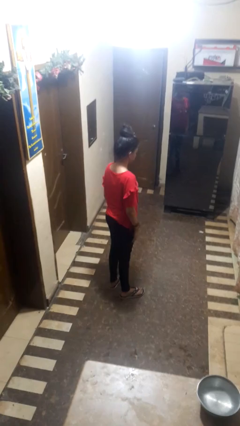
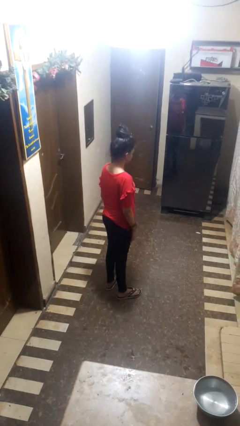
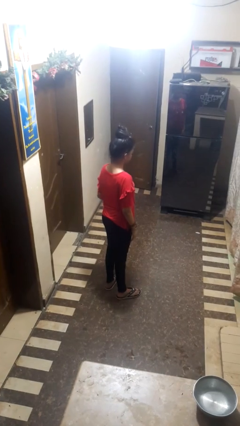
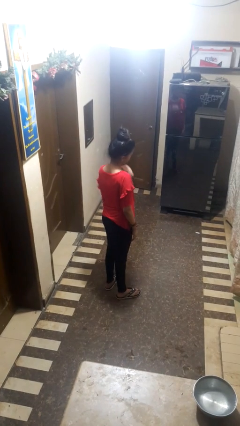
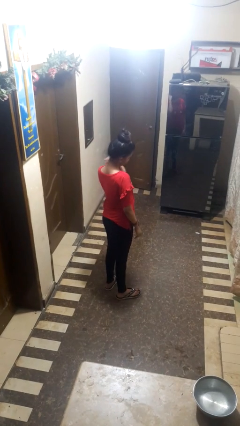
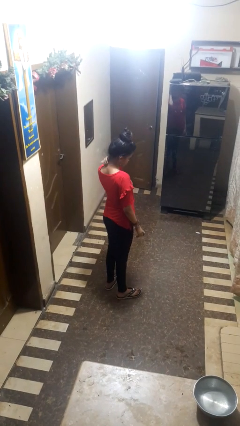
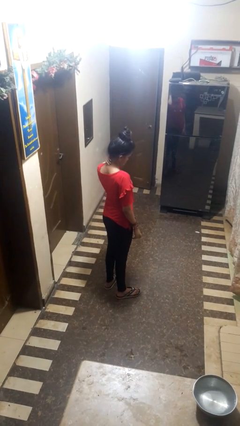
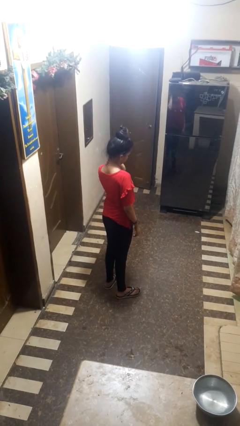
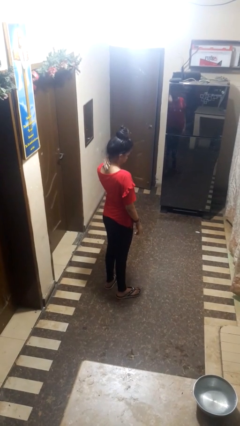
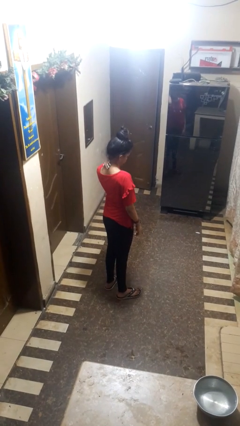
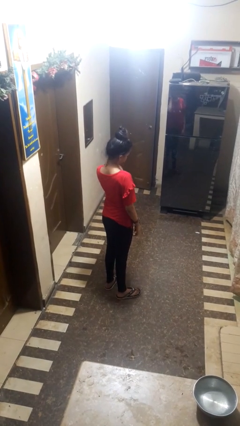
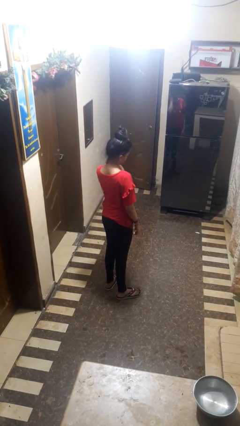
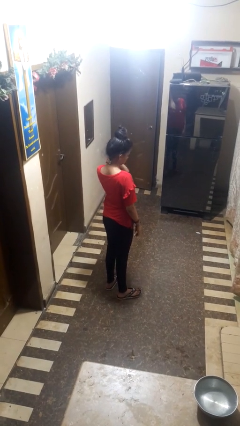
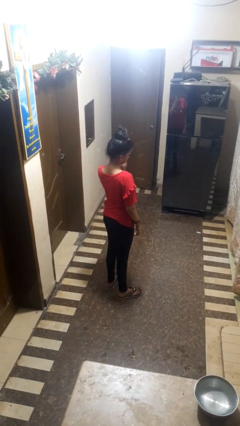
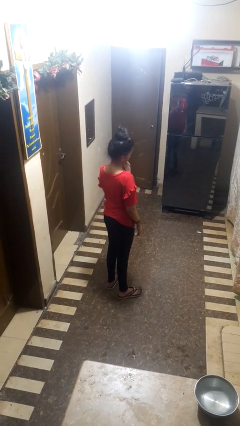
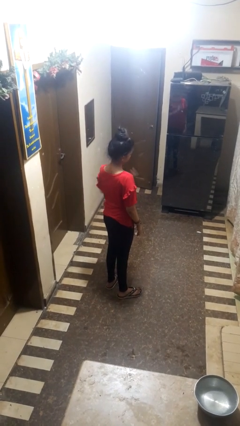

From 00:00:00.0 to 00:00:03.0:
person rubs neck

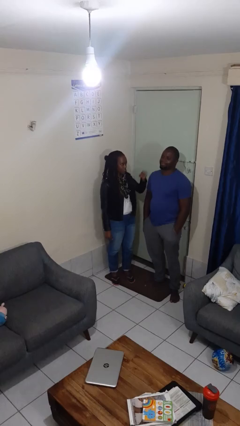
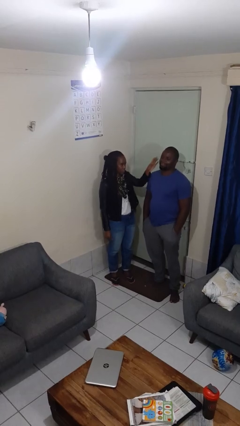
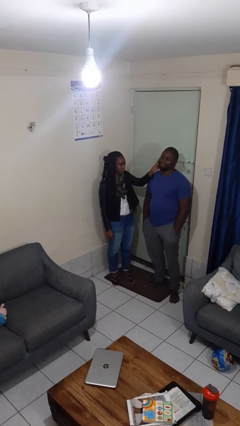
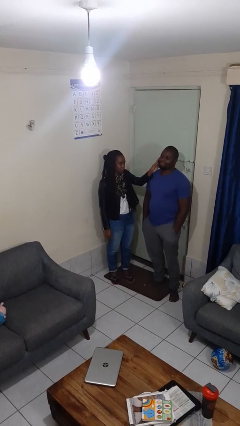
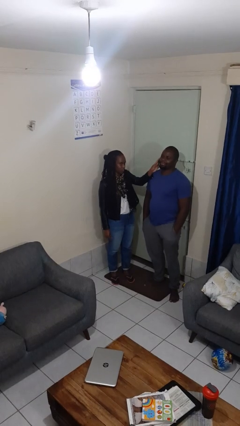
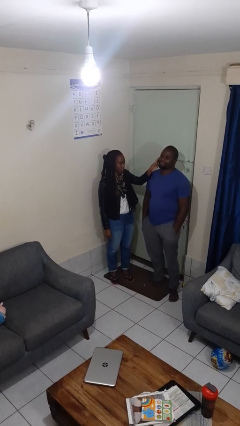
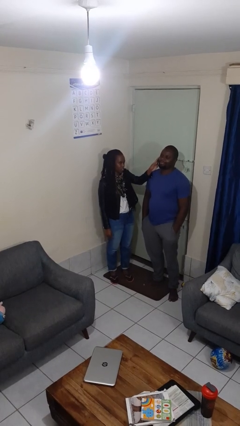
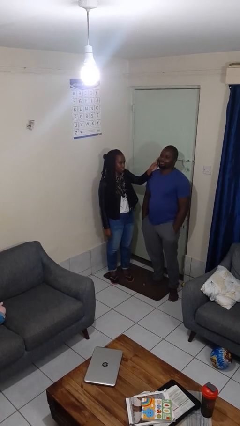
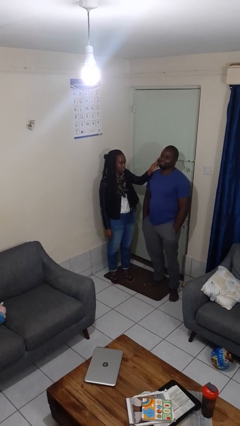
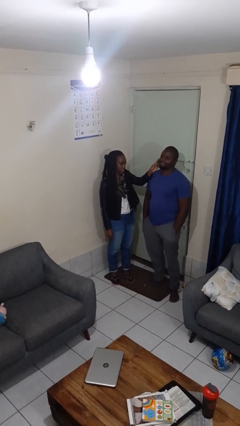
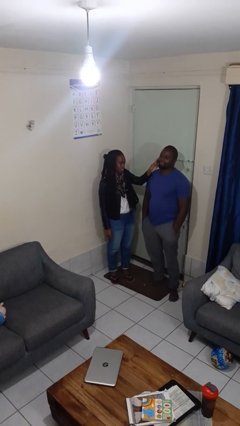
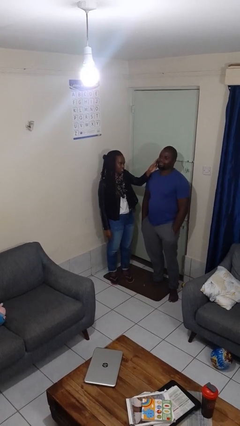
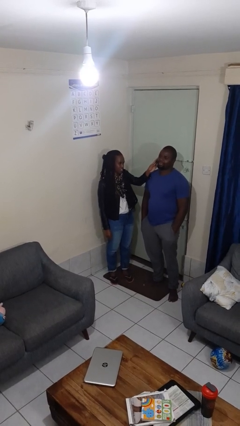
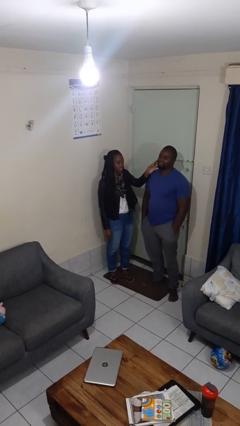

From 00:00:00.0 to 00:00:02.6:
person touches face of person

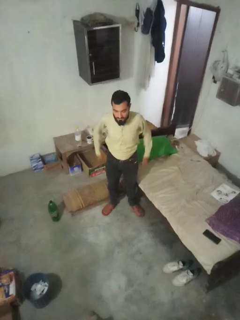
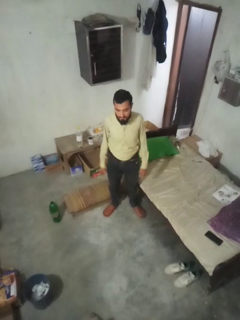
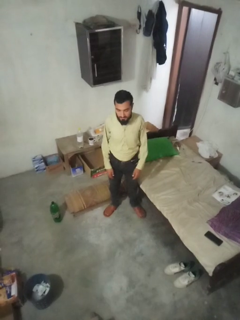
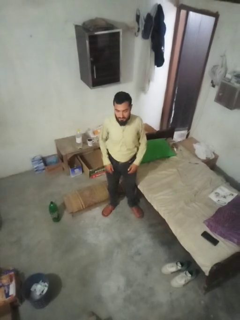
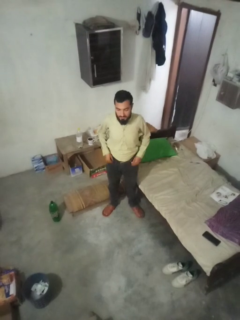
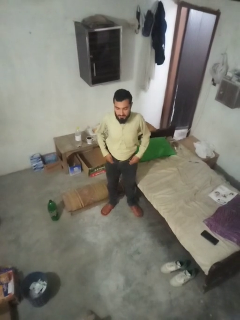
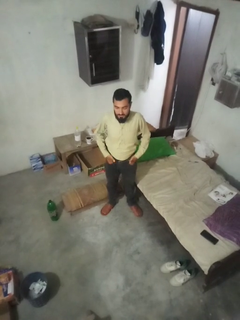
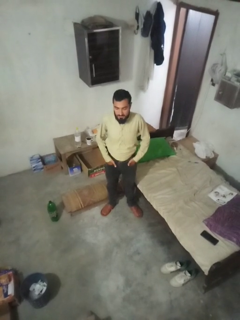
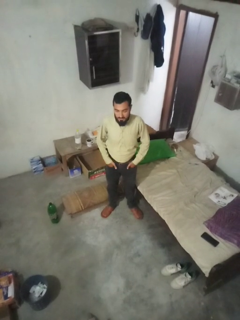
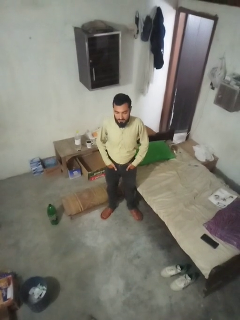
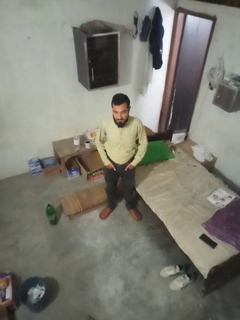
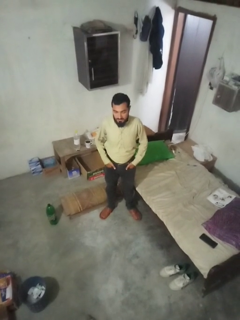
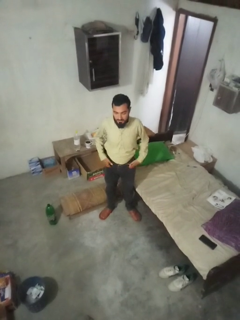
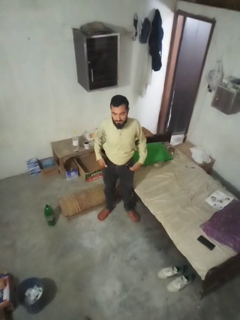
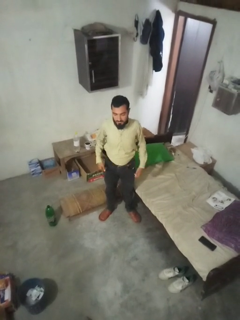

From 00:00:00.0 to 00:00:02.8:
person puts hands in back pockets

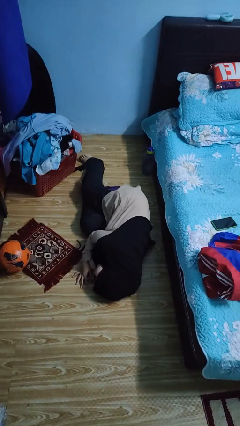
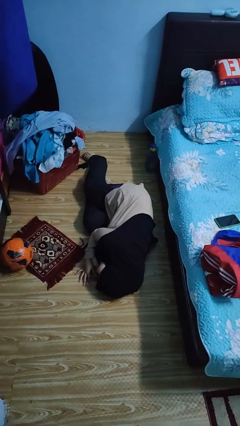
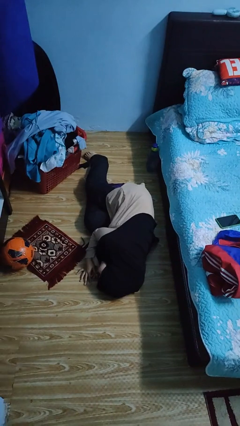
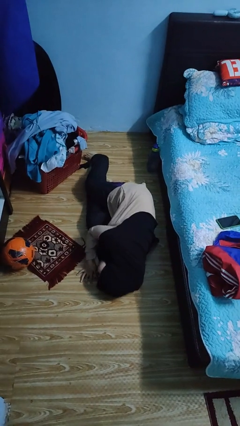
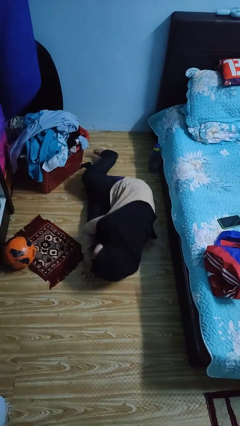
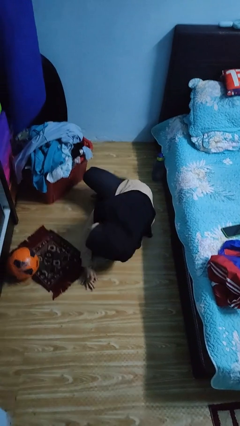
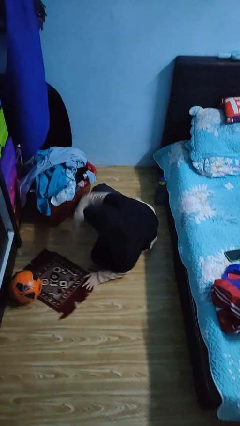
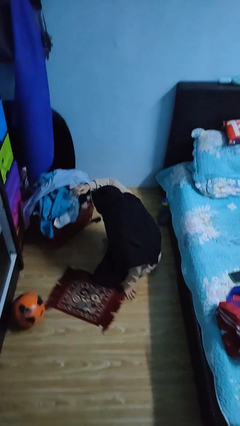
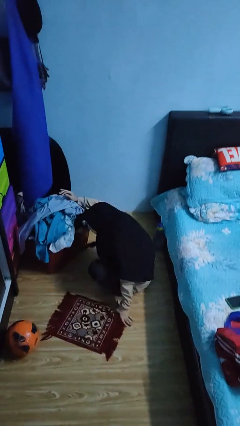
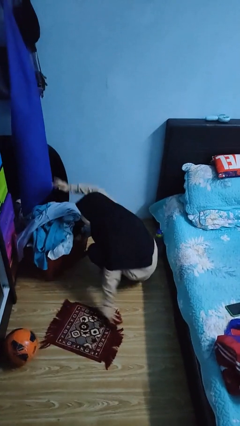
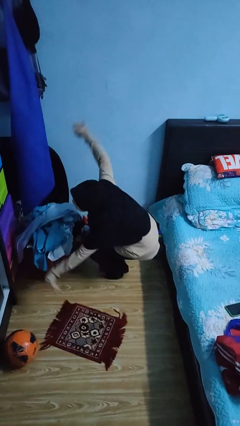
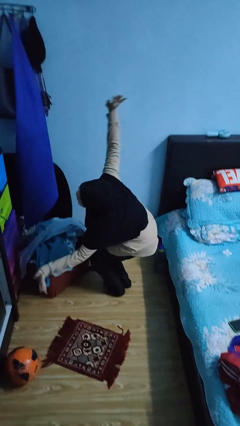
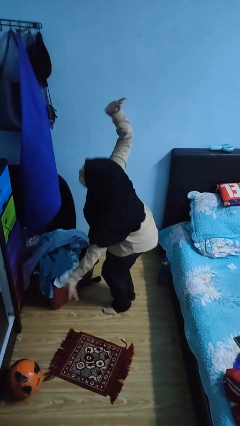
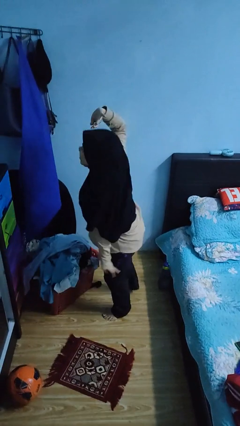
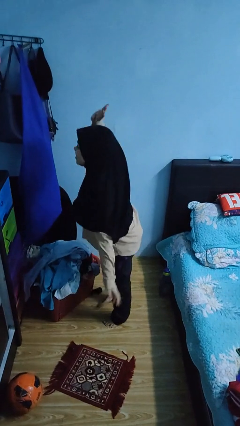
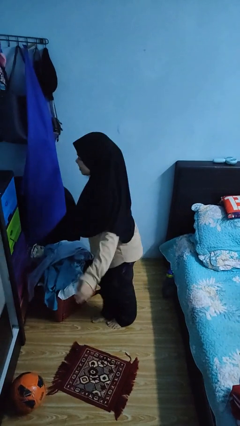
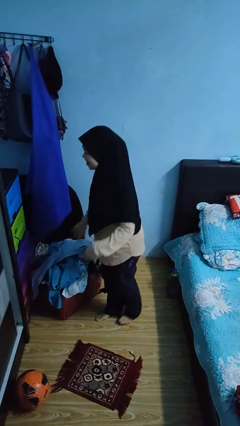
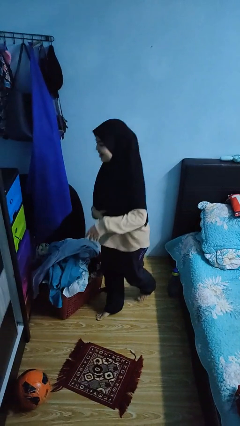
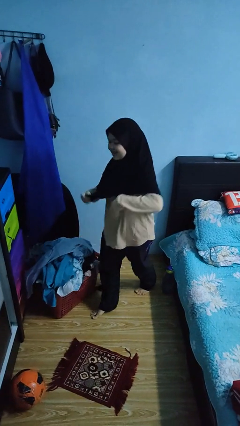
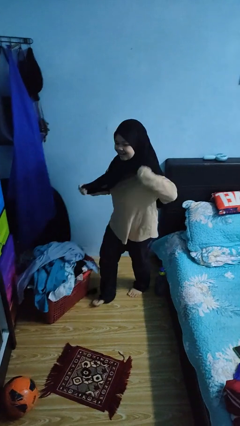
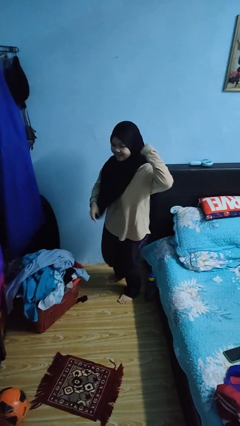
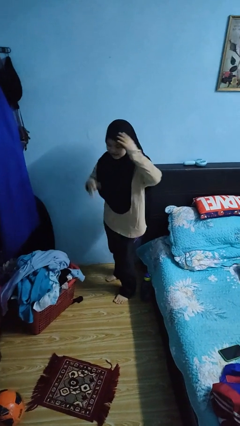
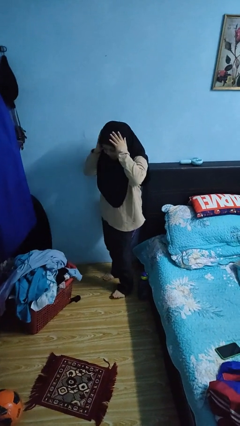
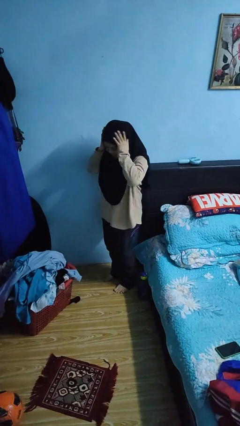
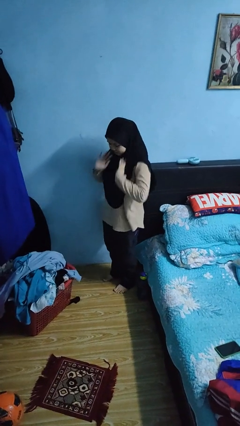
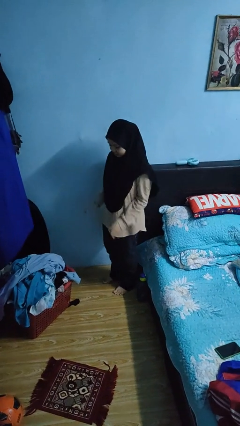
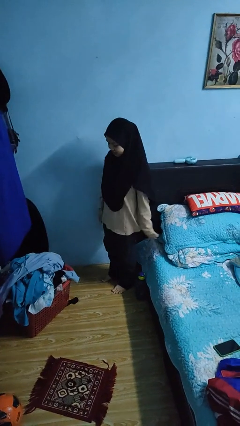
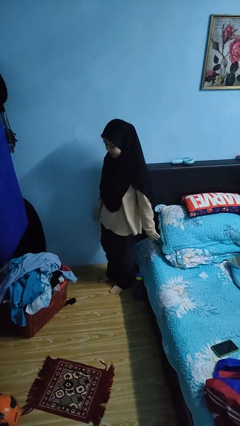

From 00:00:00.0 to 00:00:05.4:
person stands up from floor

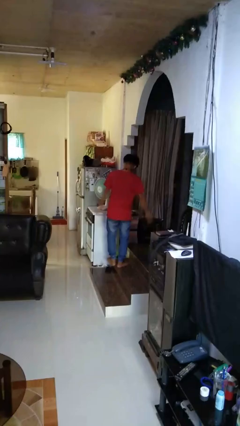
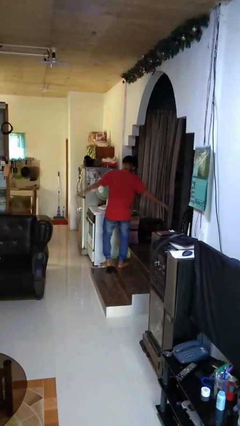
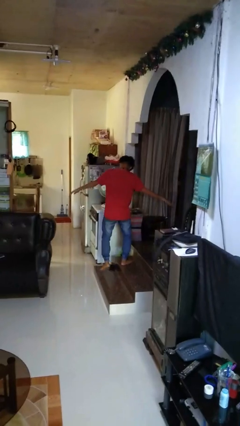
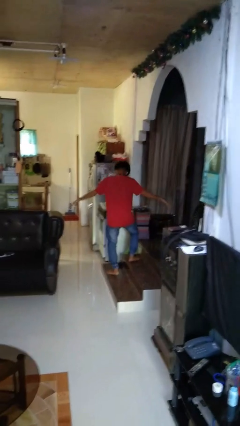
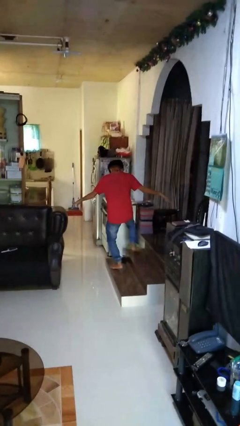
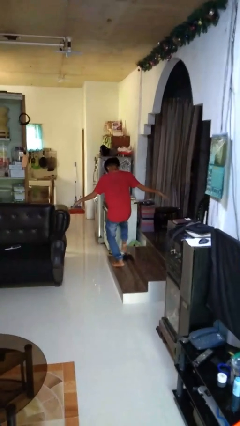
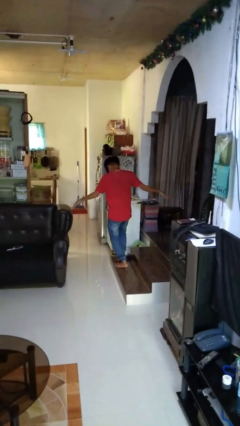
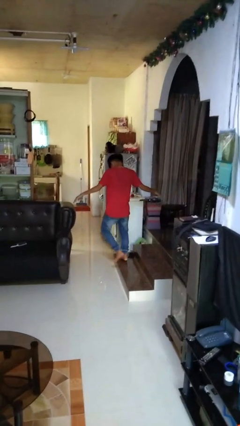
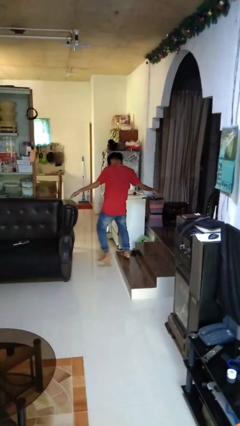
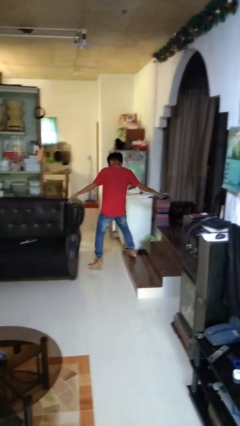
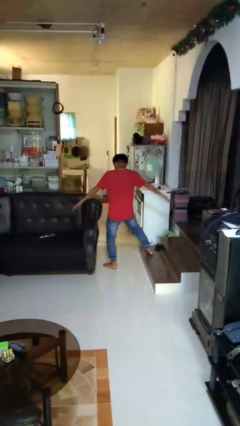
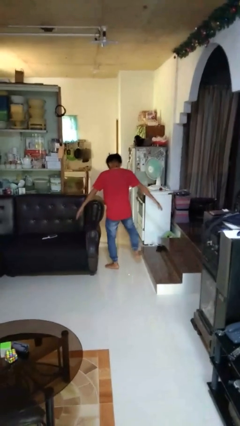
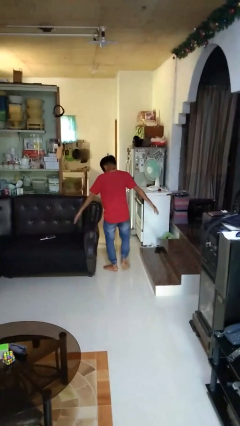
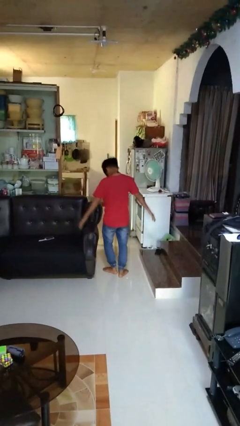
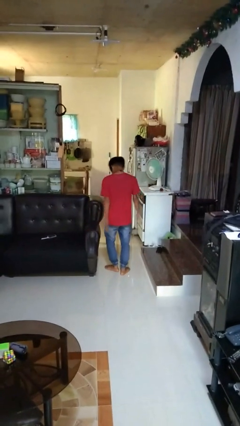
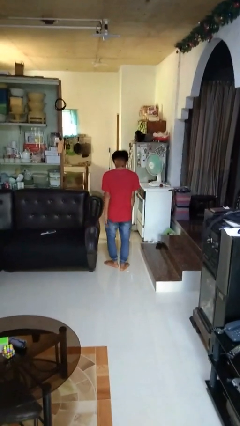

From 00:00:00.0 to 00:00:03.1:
person walks tiptoe

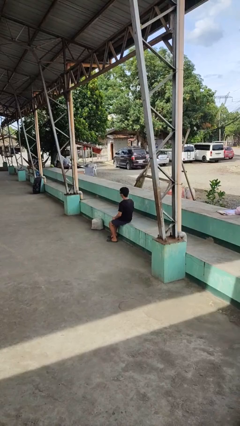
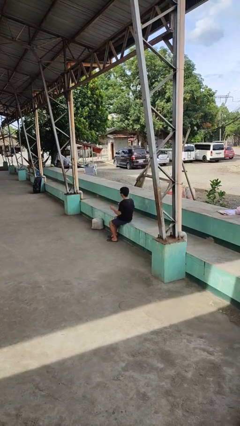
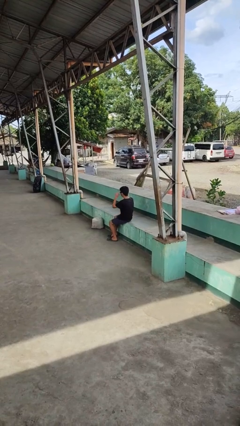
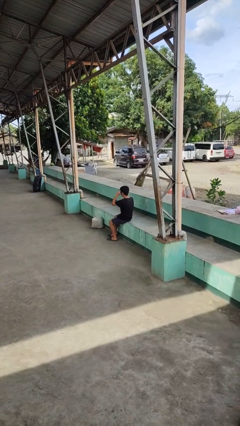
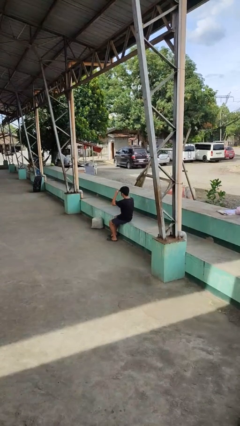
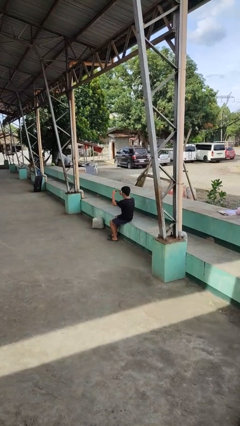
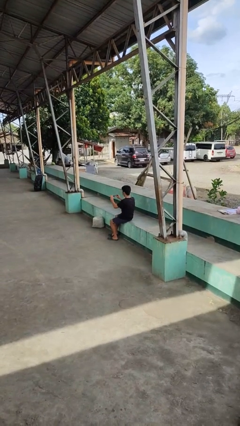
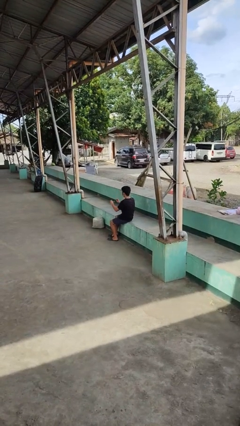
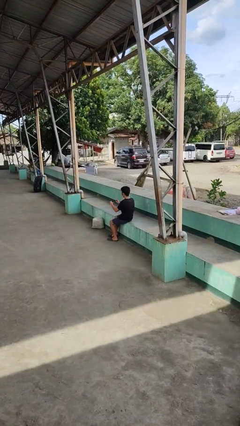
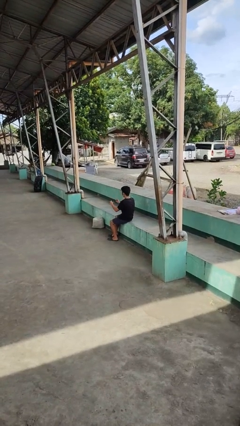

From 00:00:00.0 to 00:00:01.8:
person takes off sunglasses
